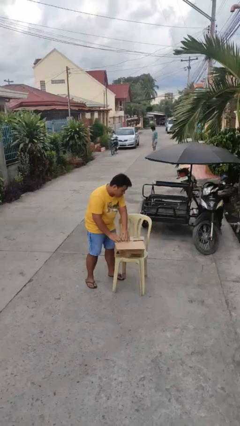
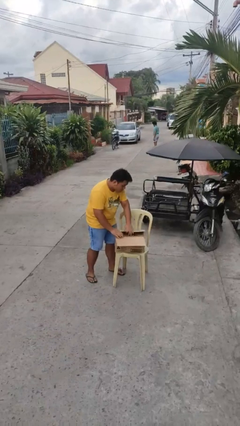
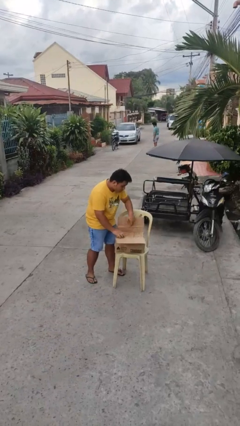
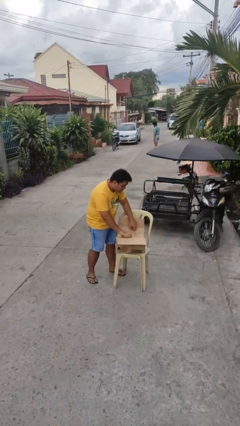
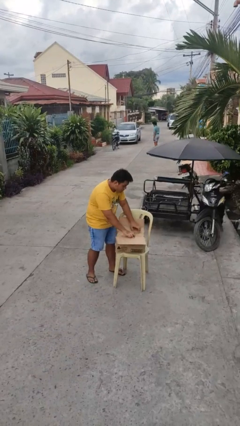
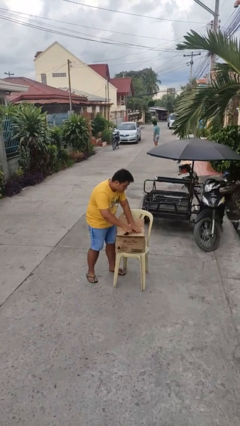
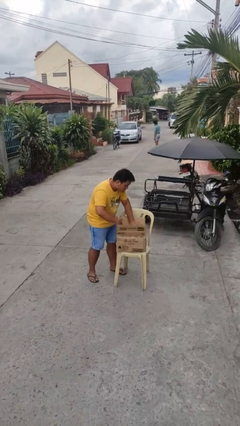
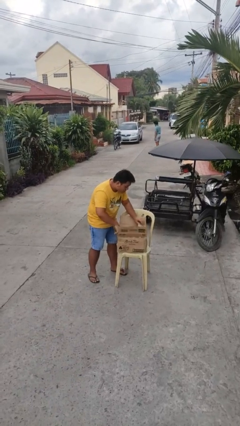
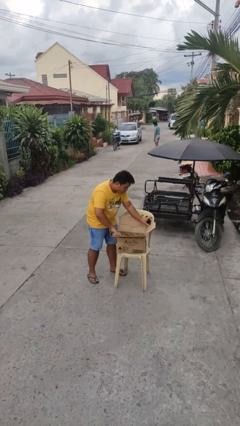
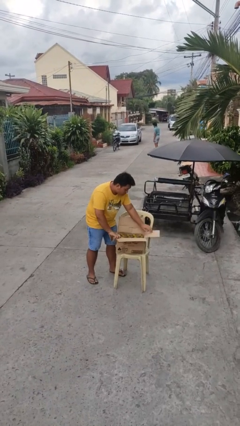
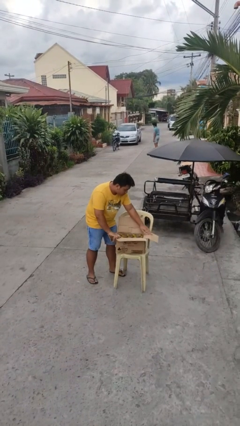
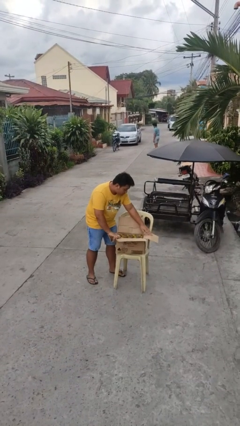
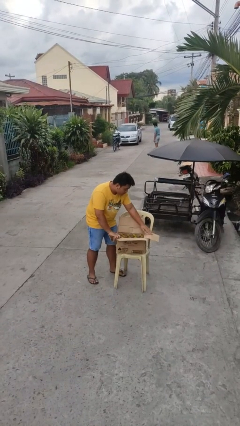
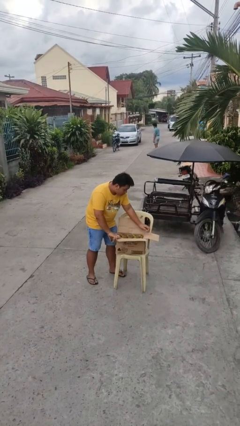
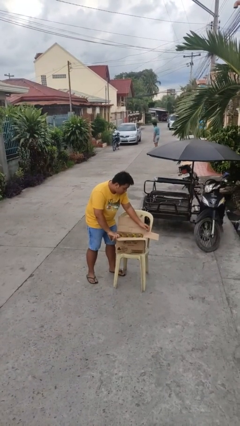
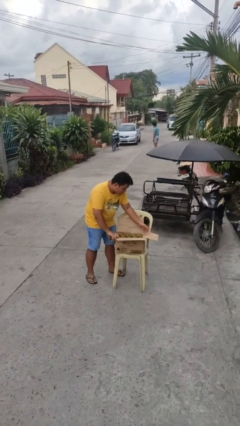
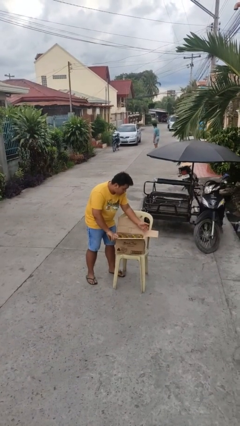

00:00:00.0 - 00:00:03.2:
person opens box

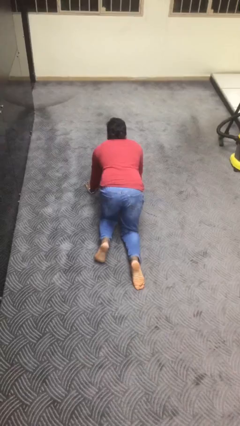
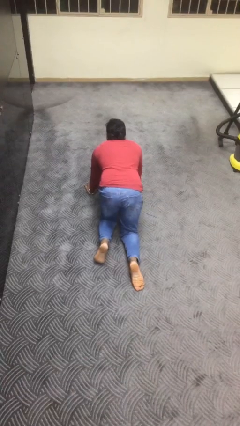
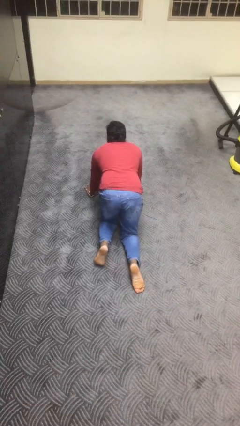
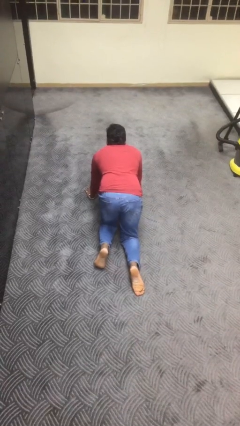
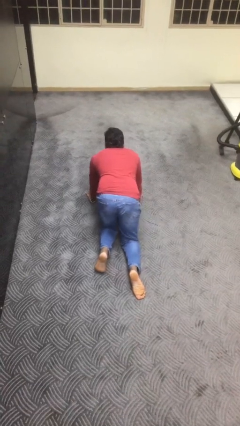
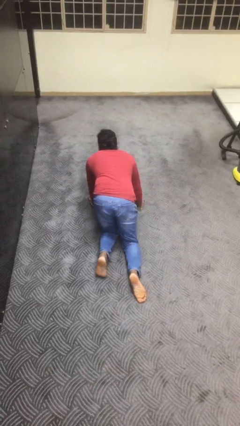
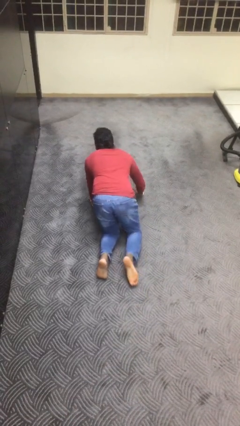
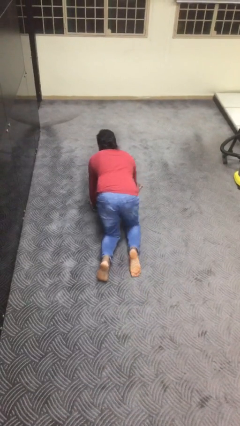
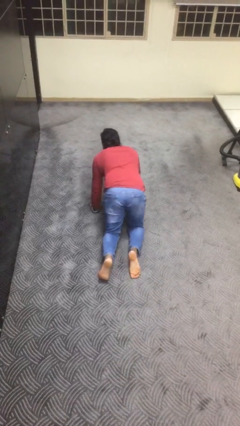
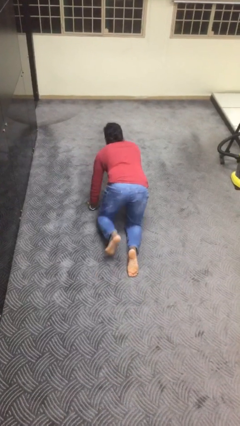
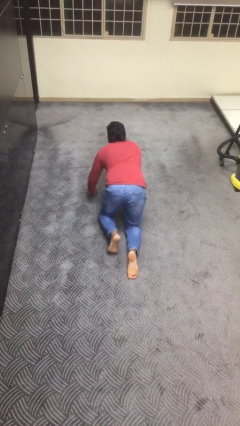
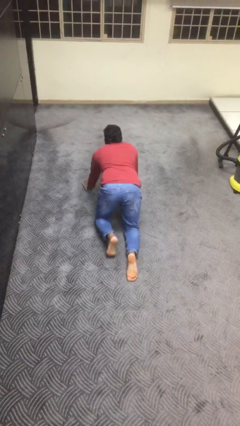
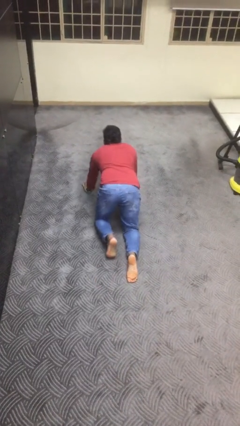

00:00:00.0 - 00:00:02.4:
person crawls

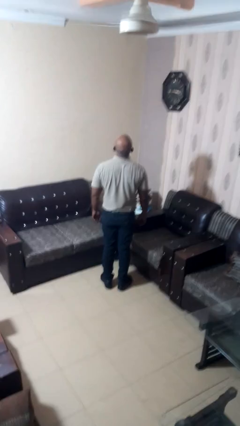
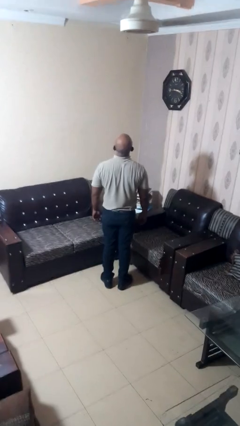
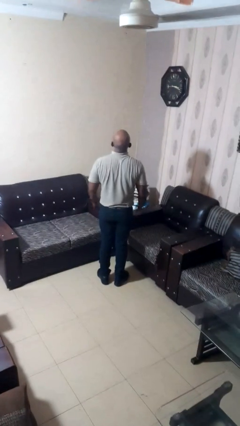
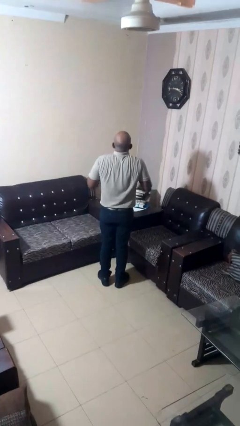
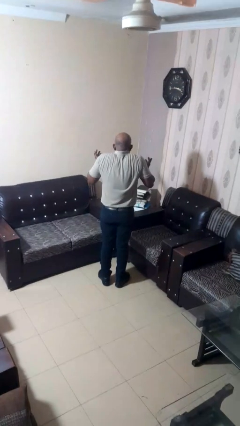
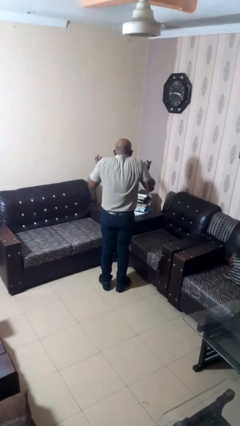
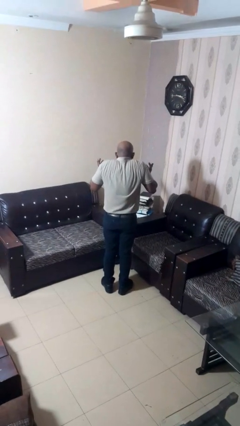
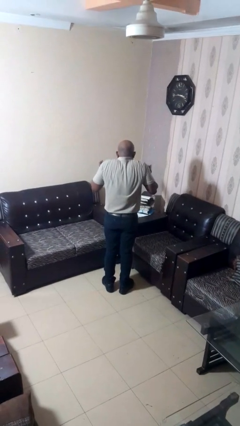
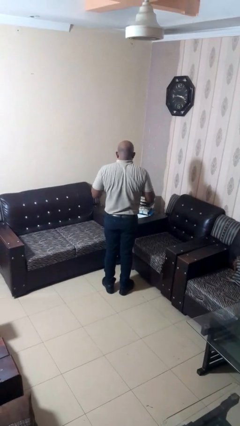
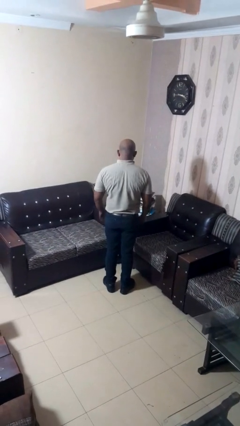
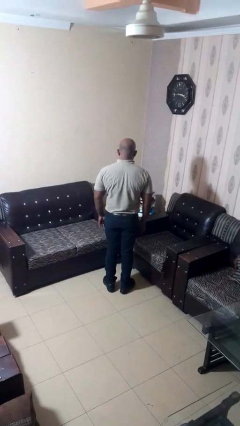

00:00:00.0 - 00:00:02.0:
person shrugs

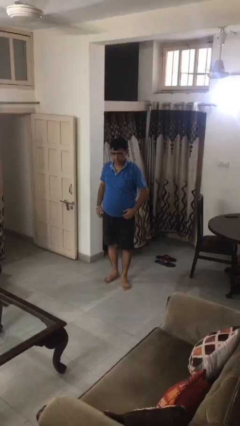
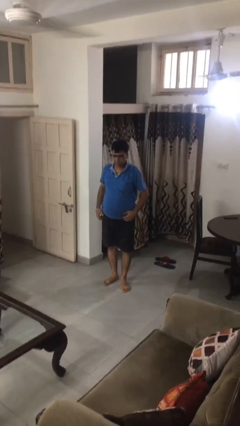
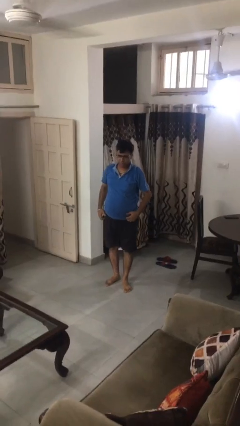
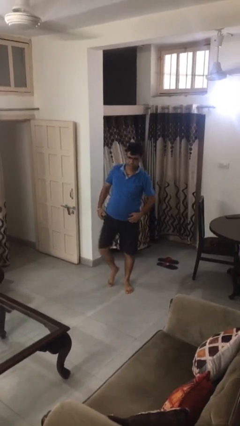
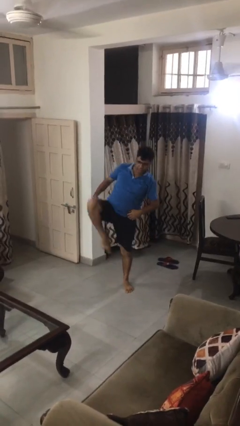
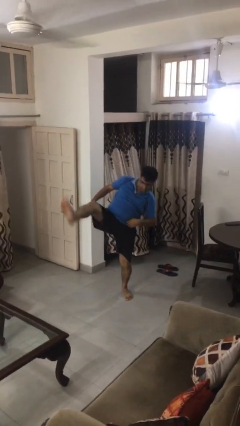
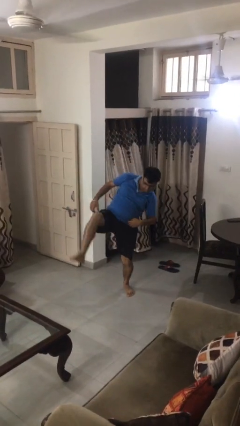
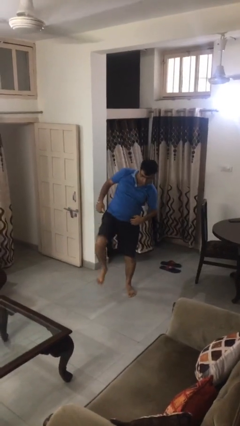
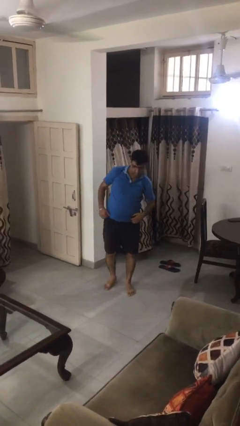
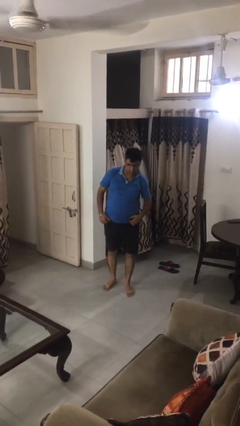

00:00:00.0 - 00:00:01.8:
person karate kicks

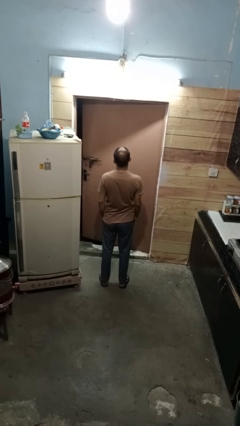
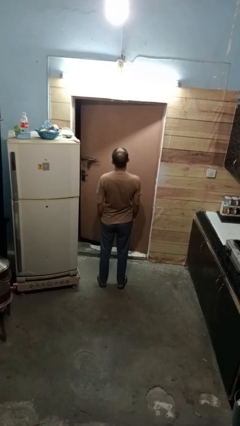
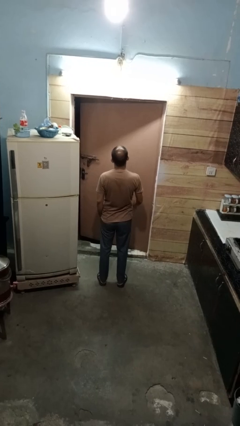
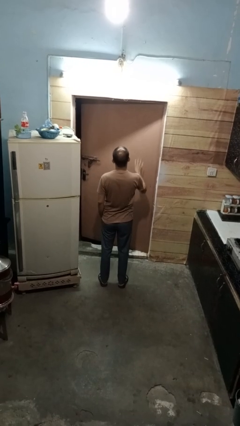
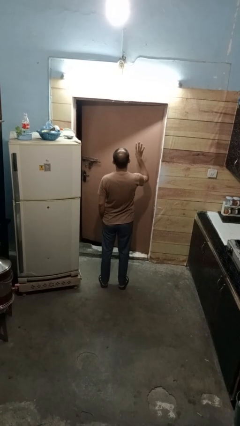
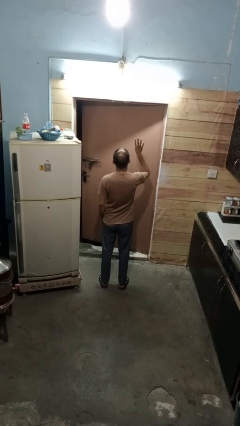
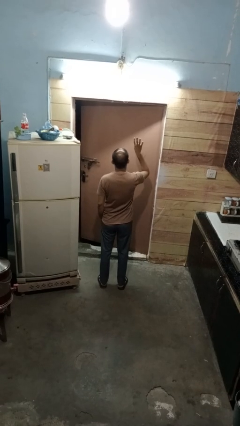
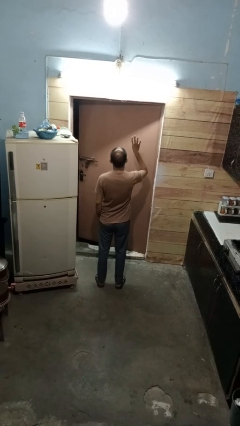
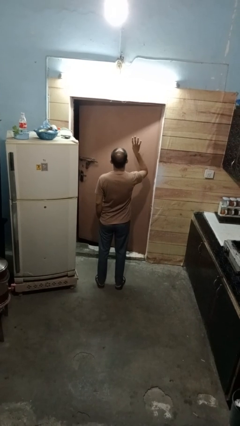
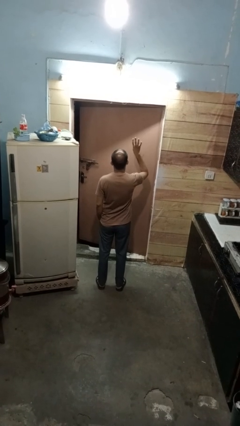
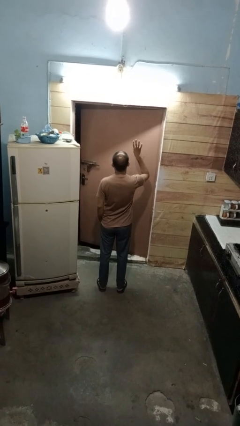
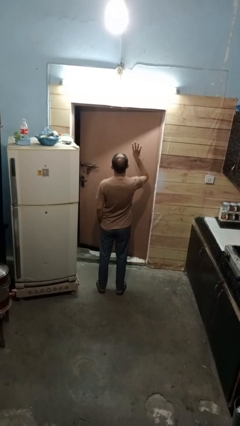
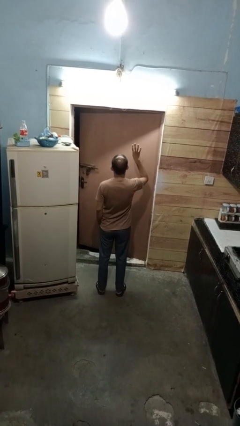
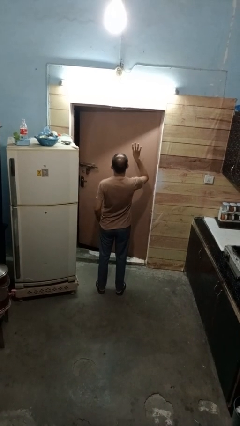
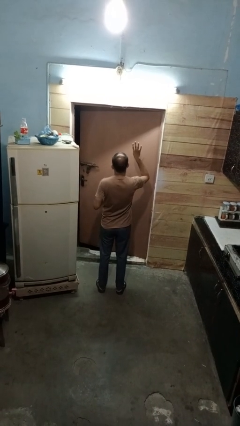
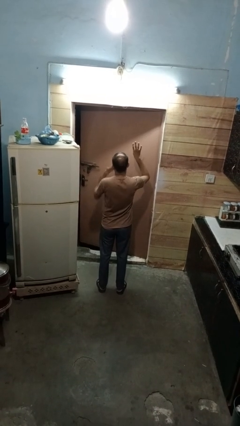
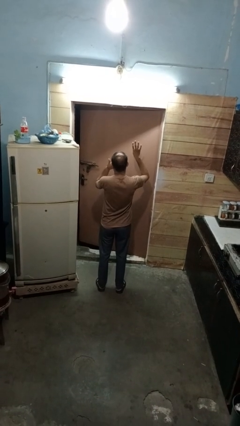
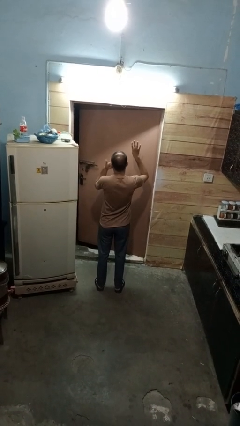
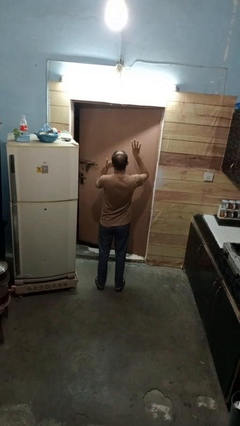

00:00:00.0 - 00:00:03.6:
person gestures number four

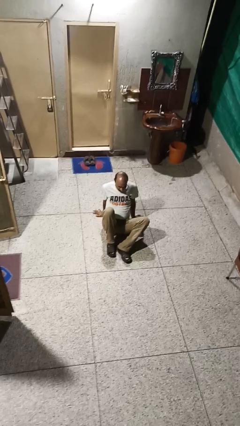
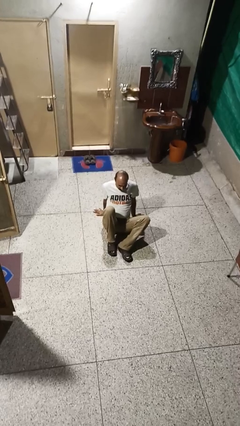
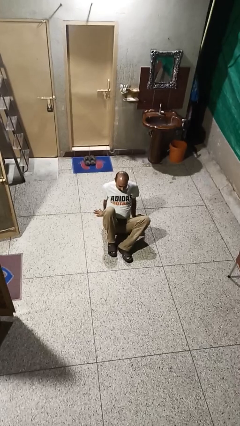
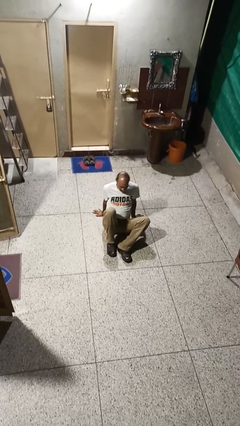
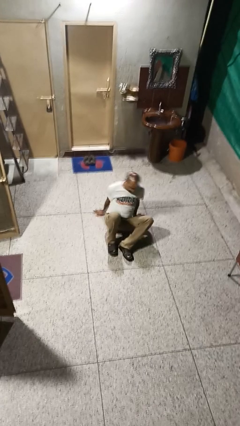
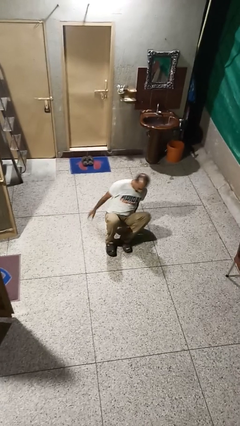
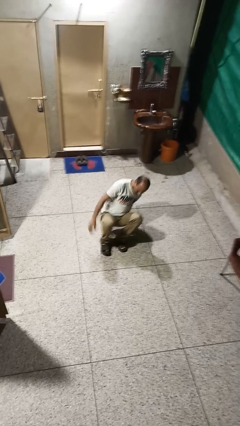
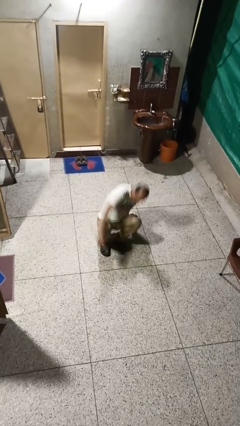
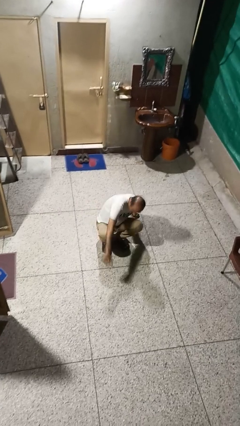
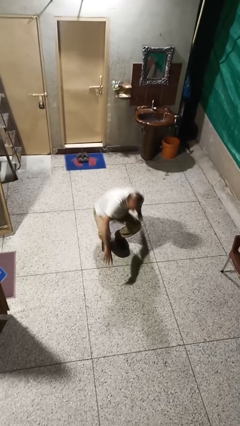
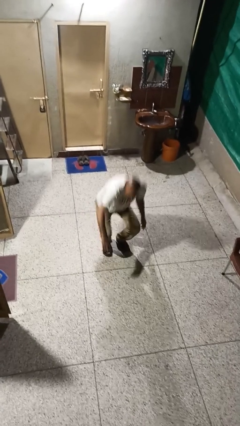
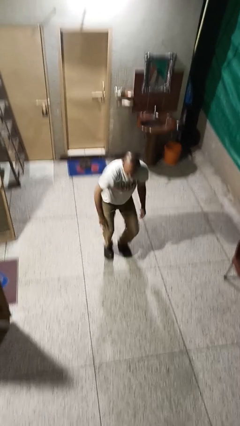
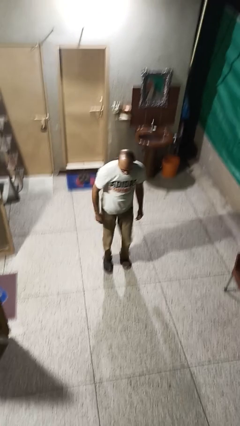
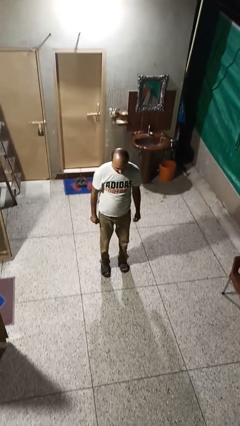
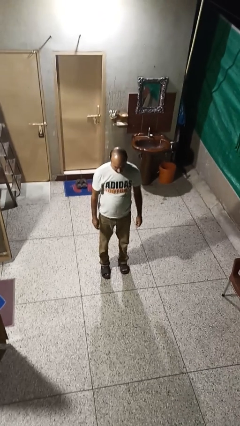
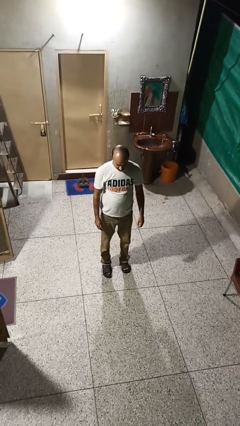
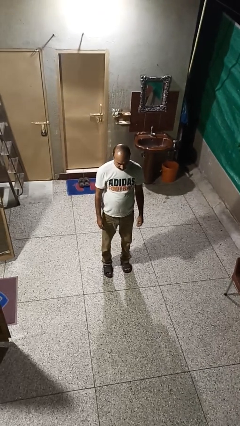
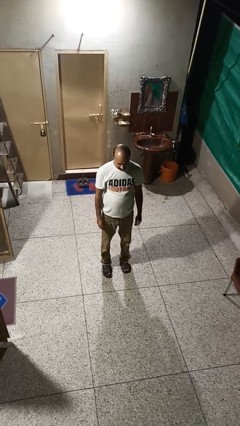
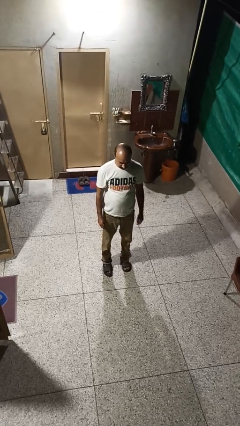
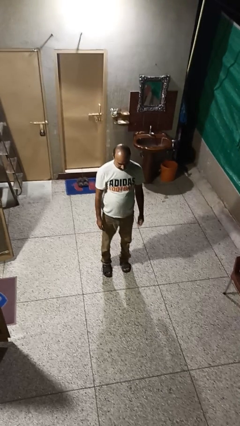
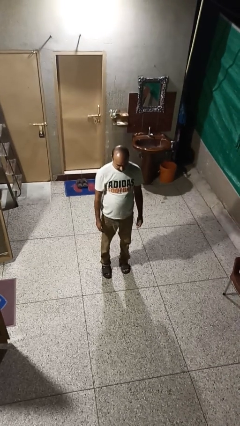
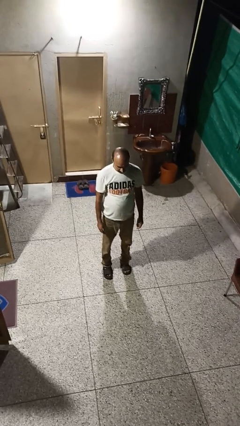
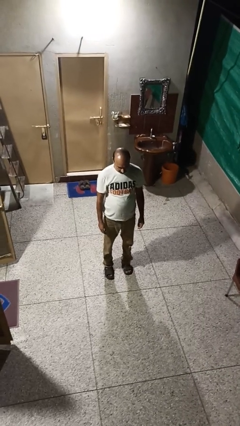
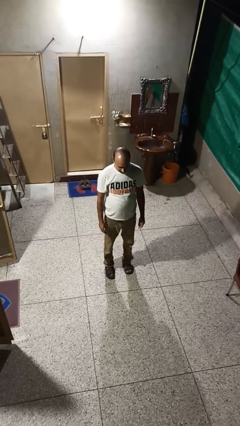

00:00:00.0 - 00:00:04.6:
person stands up from floor
